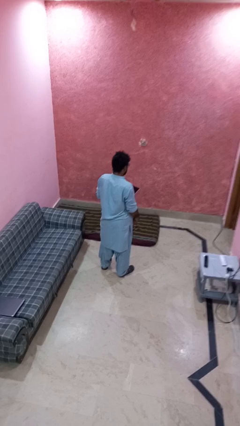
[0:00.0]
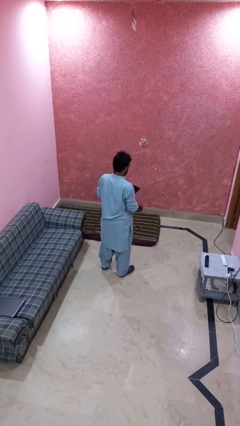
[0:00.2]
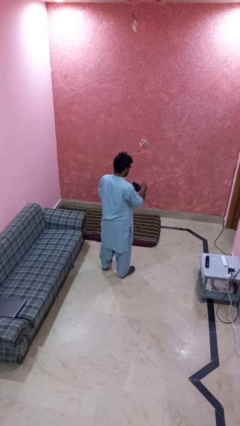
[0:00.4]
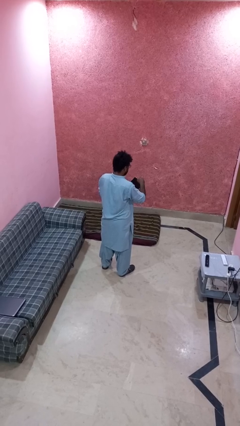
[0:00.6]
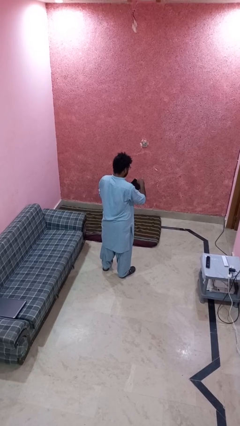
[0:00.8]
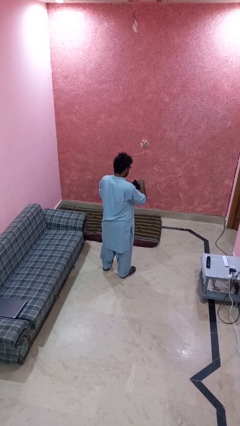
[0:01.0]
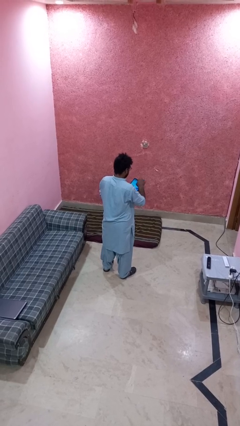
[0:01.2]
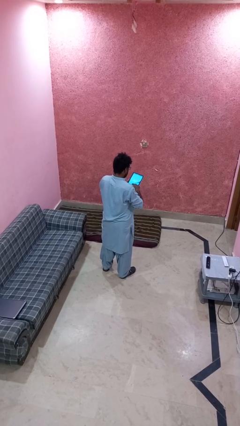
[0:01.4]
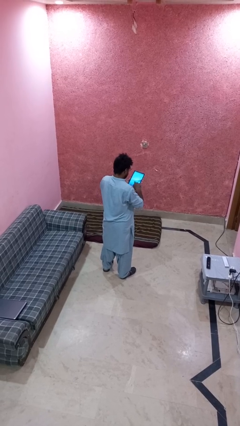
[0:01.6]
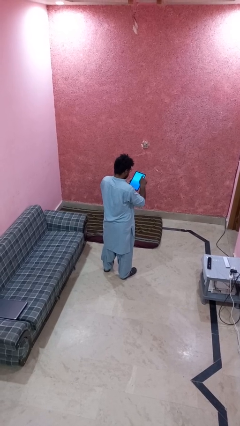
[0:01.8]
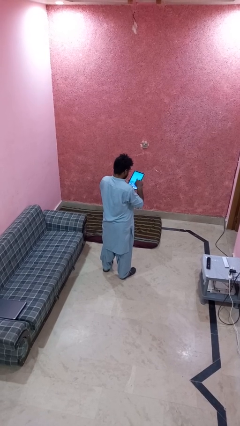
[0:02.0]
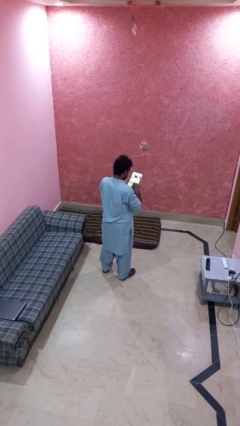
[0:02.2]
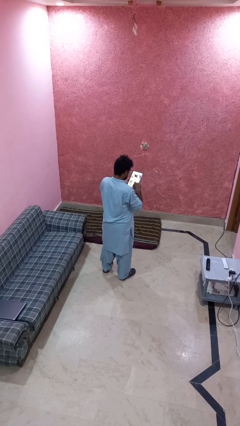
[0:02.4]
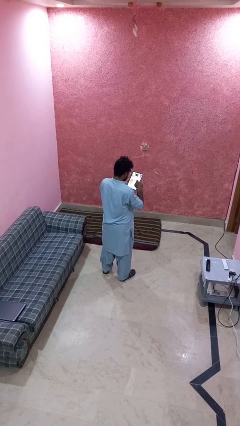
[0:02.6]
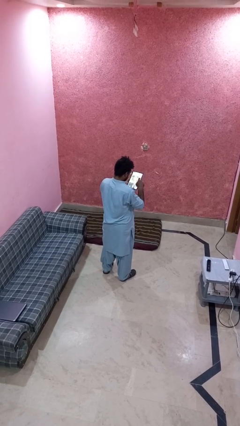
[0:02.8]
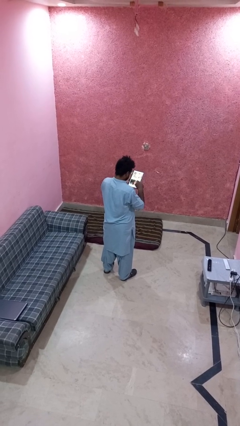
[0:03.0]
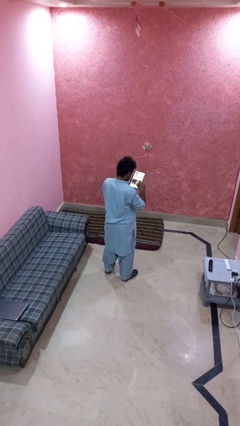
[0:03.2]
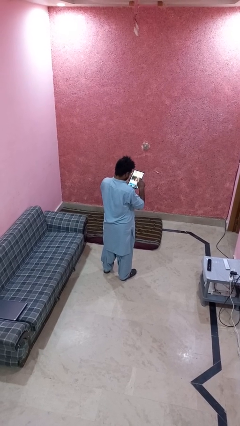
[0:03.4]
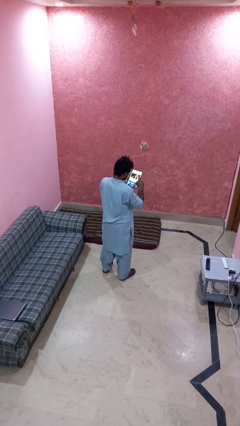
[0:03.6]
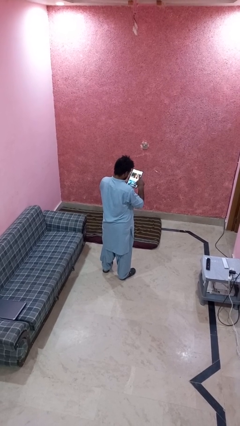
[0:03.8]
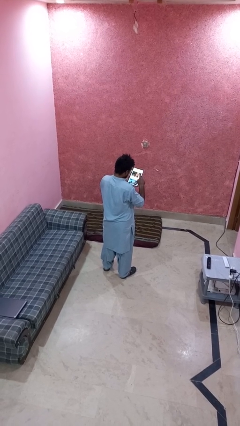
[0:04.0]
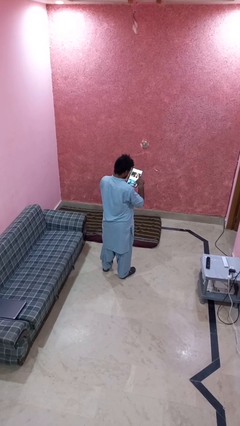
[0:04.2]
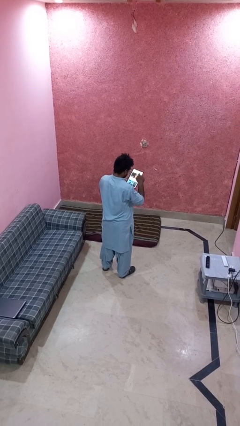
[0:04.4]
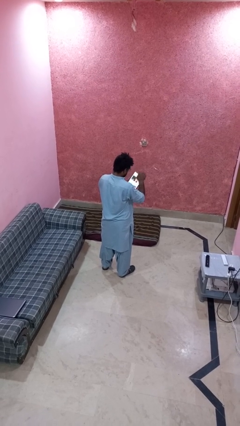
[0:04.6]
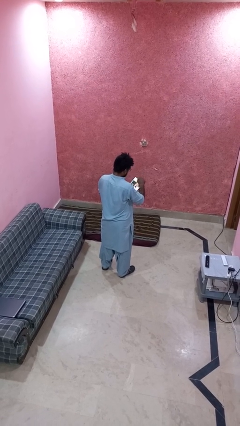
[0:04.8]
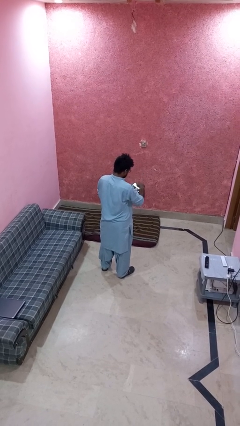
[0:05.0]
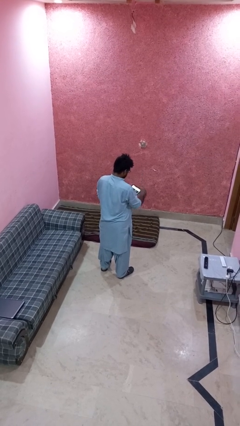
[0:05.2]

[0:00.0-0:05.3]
person interacts with tablet

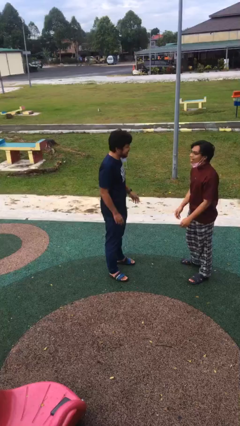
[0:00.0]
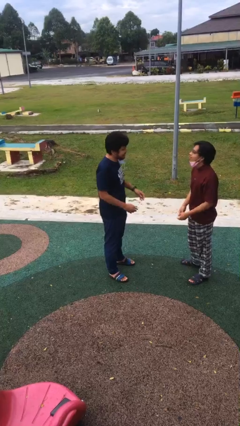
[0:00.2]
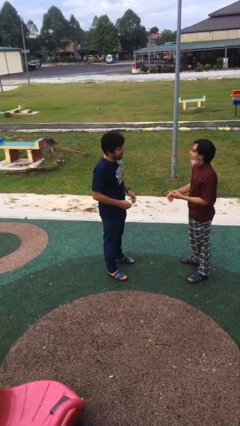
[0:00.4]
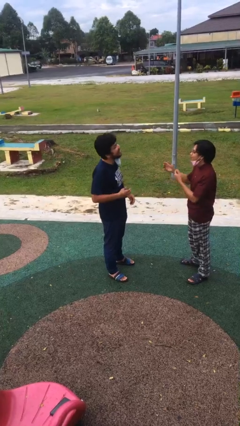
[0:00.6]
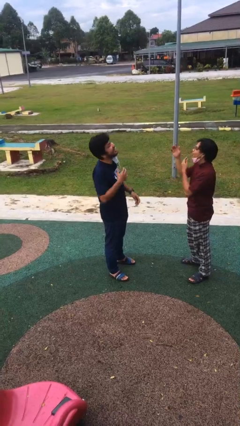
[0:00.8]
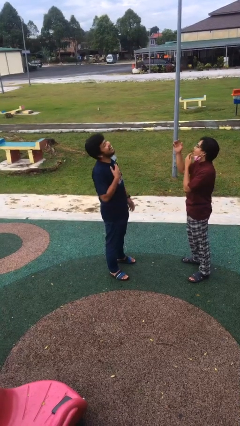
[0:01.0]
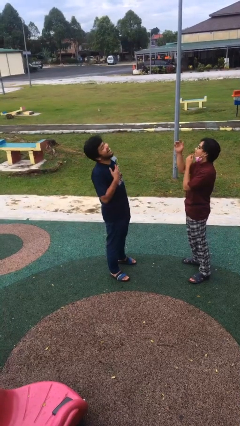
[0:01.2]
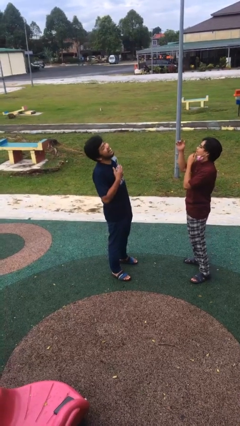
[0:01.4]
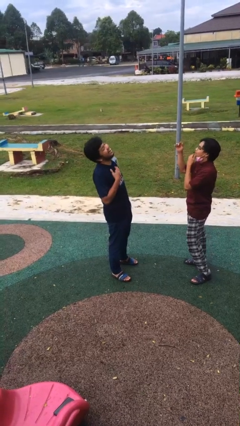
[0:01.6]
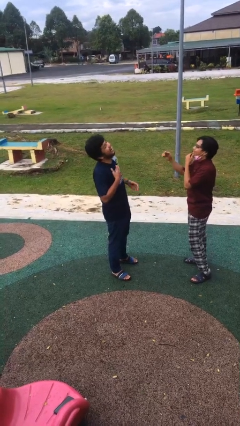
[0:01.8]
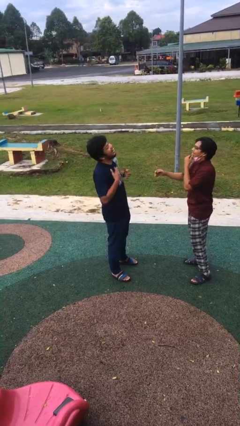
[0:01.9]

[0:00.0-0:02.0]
person laughs with person

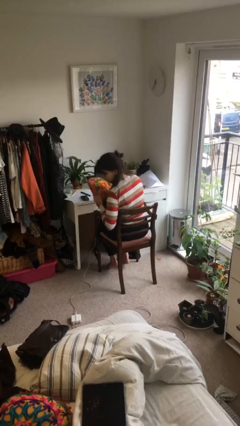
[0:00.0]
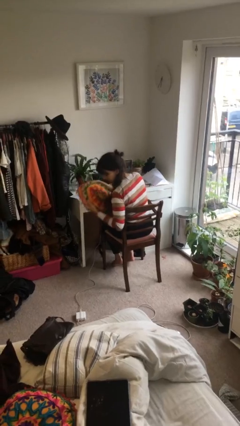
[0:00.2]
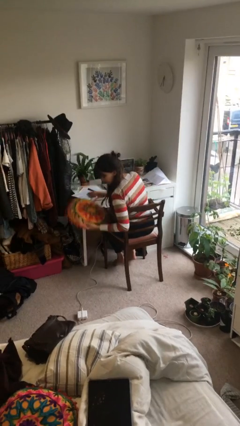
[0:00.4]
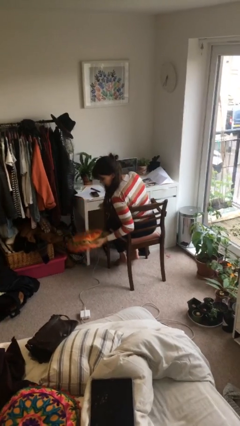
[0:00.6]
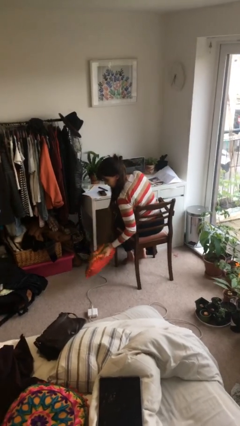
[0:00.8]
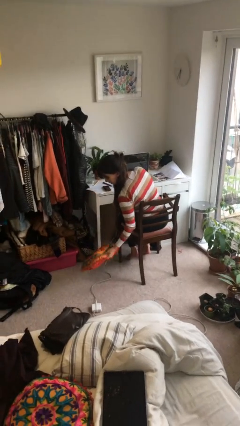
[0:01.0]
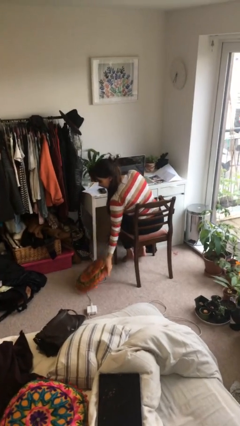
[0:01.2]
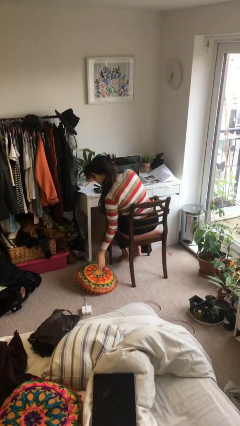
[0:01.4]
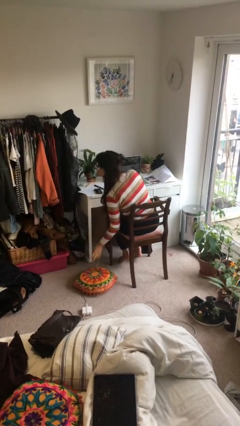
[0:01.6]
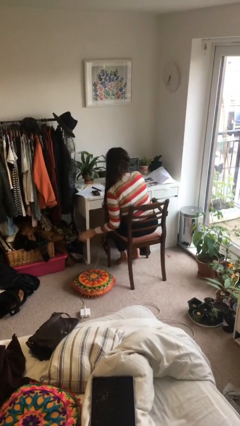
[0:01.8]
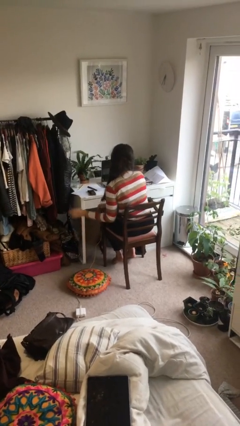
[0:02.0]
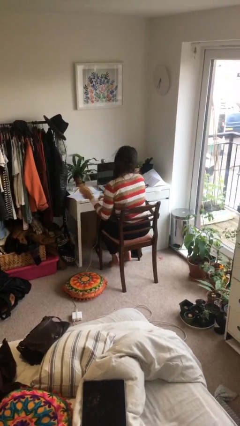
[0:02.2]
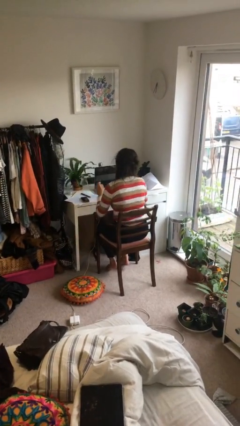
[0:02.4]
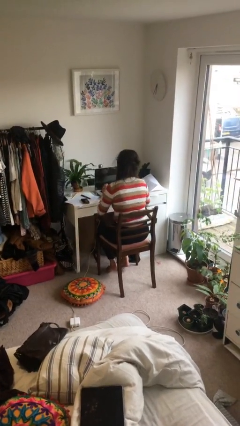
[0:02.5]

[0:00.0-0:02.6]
person puts down object on floor

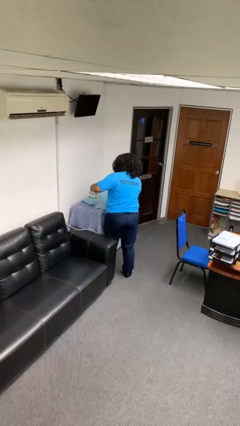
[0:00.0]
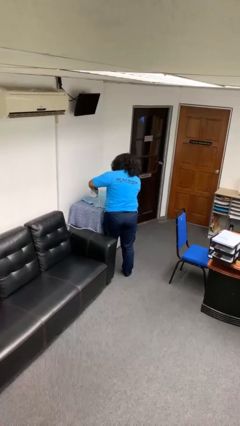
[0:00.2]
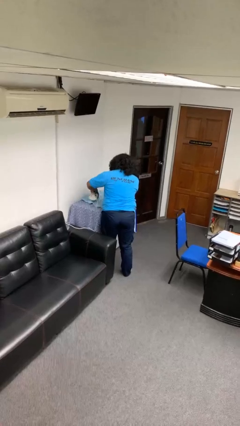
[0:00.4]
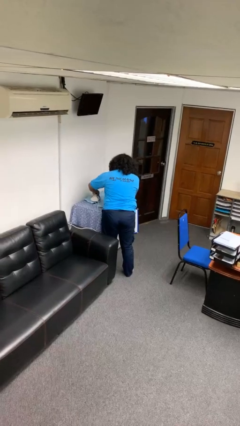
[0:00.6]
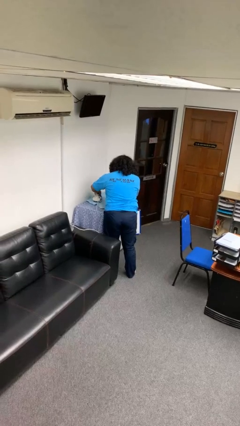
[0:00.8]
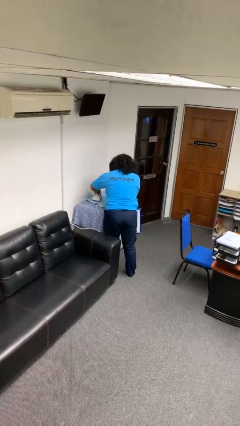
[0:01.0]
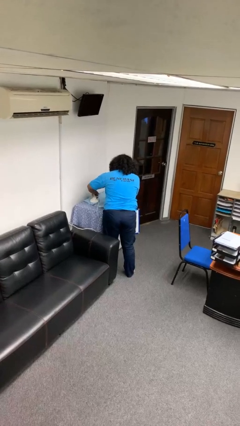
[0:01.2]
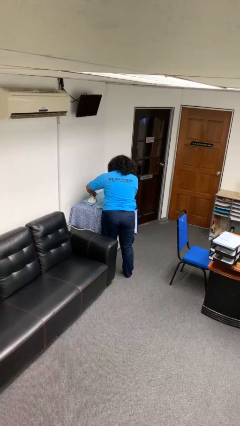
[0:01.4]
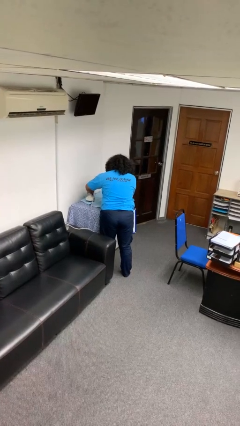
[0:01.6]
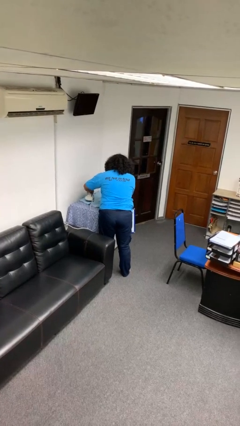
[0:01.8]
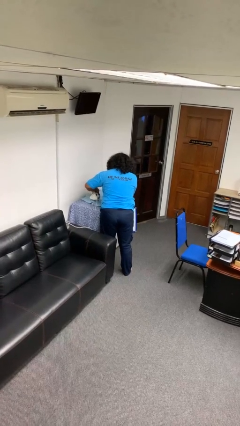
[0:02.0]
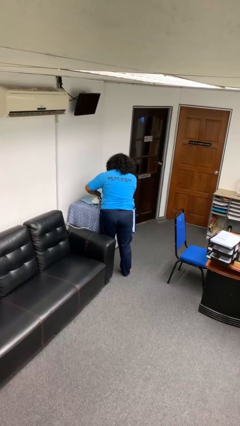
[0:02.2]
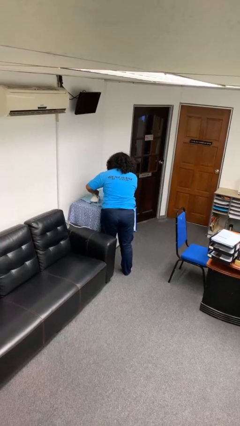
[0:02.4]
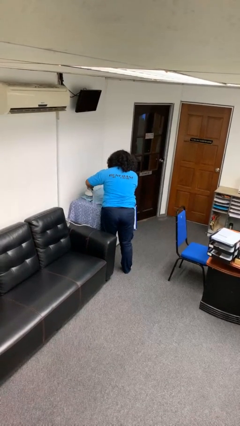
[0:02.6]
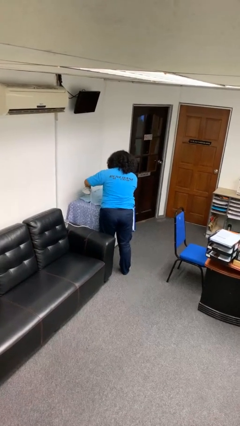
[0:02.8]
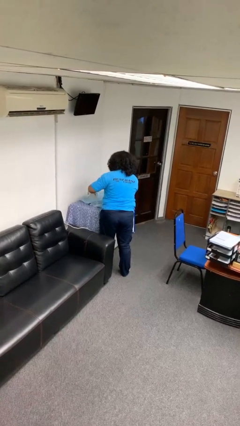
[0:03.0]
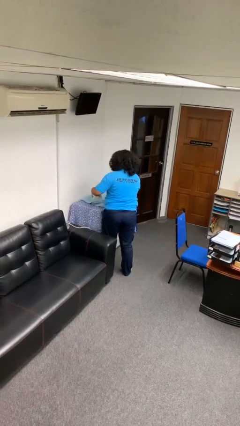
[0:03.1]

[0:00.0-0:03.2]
person irons clothes

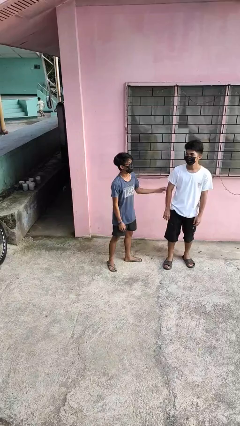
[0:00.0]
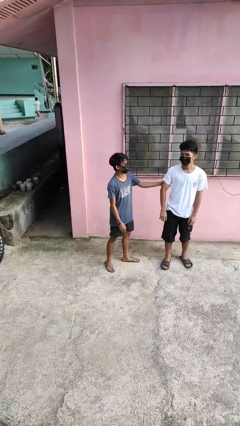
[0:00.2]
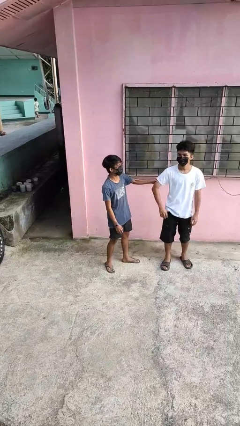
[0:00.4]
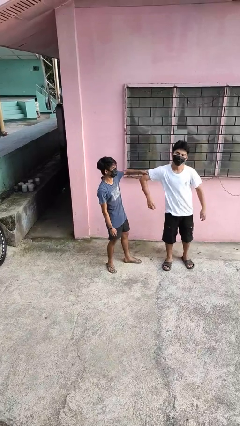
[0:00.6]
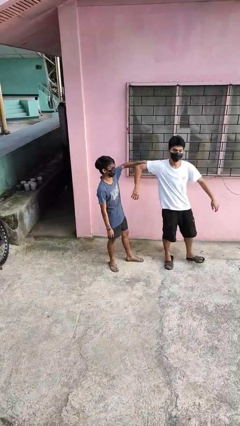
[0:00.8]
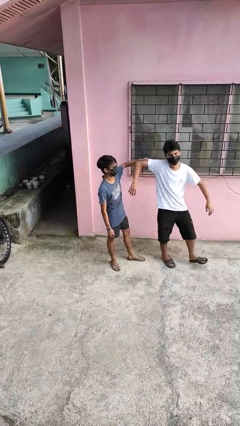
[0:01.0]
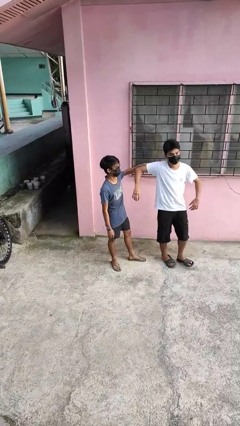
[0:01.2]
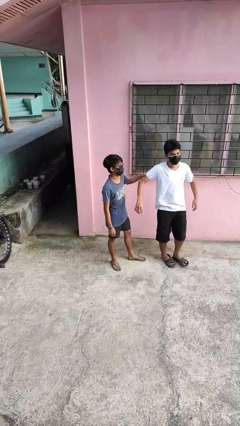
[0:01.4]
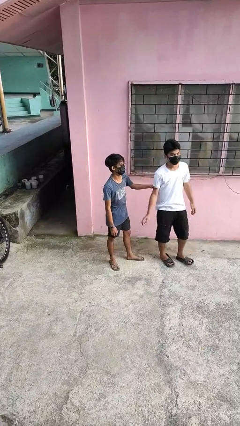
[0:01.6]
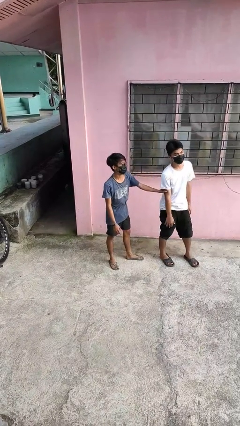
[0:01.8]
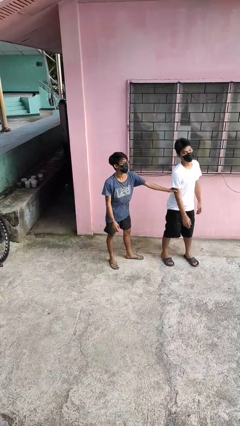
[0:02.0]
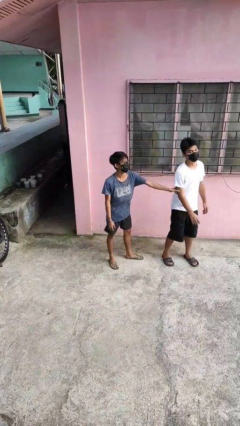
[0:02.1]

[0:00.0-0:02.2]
person grabs person by bicep

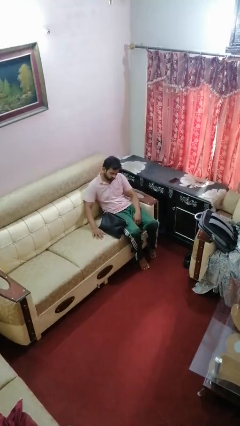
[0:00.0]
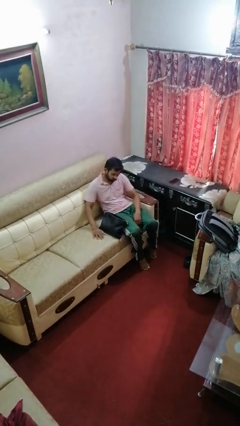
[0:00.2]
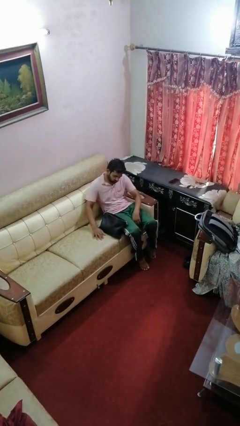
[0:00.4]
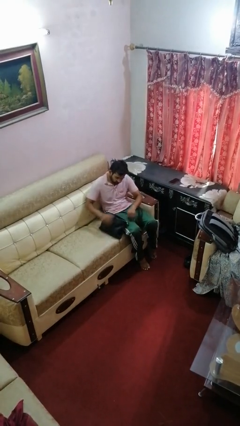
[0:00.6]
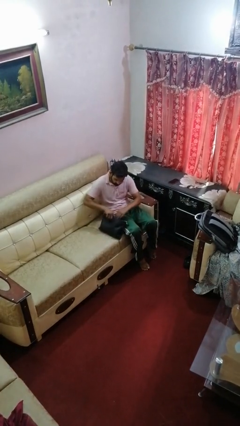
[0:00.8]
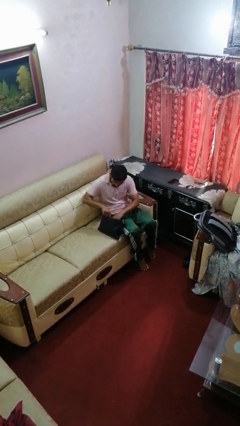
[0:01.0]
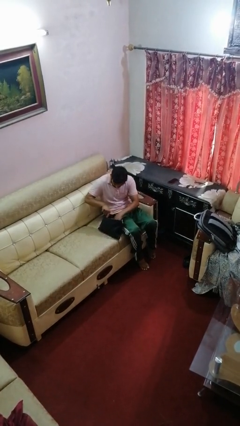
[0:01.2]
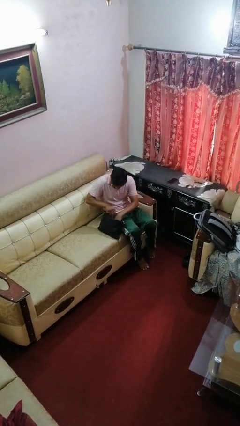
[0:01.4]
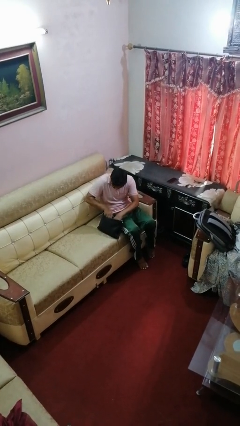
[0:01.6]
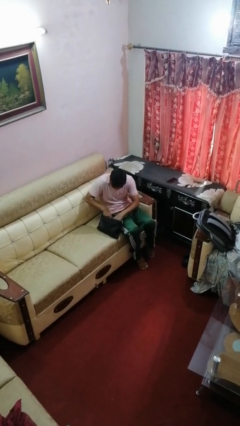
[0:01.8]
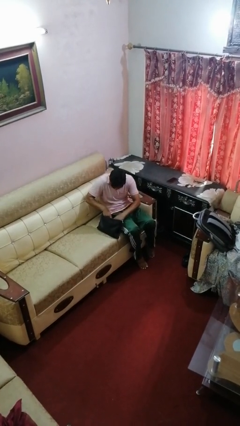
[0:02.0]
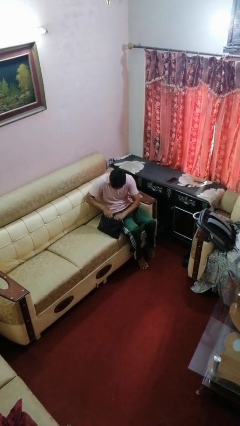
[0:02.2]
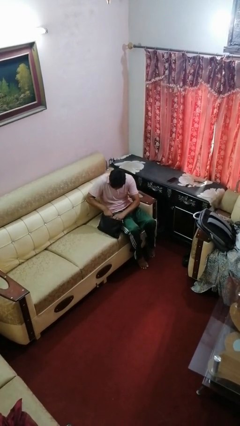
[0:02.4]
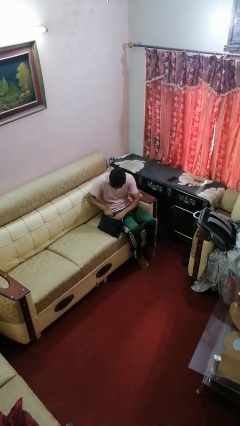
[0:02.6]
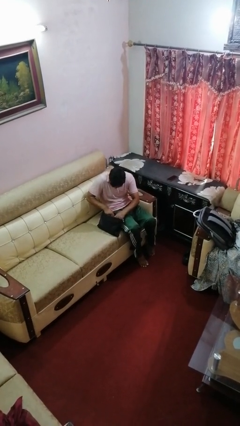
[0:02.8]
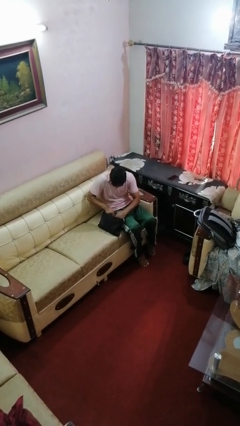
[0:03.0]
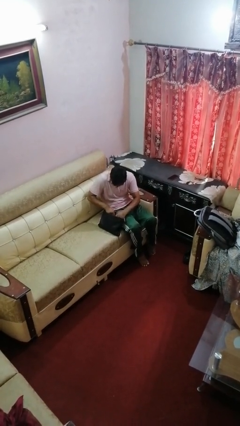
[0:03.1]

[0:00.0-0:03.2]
person searches in purse
